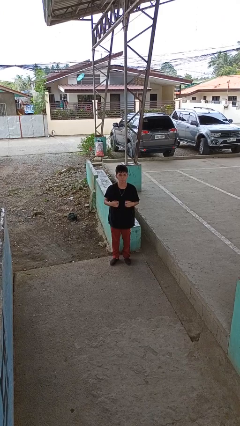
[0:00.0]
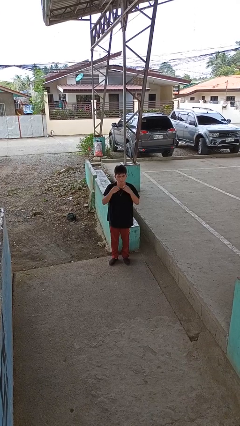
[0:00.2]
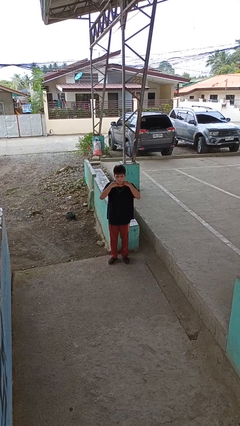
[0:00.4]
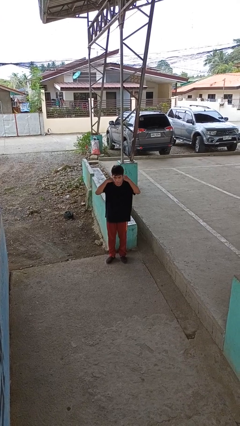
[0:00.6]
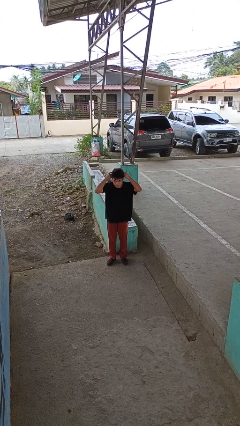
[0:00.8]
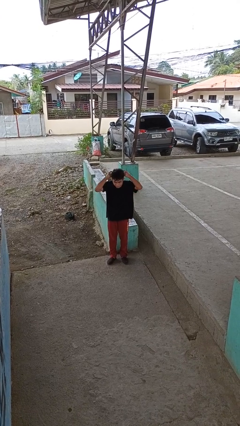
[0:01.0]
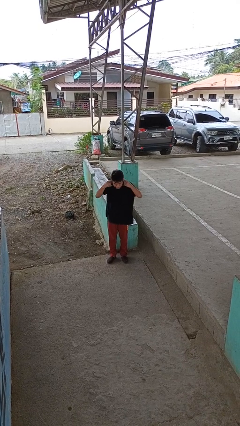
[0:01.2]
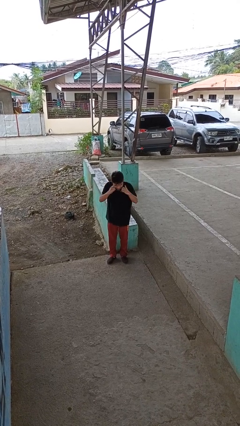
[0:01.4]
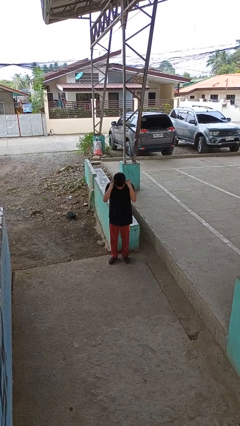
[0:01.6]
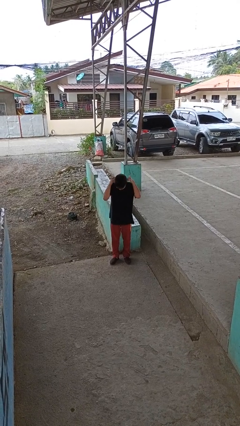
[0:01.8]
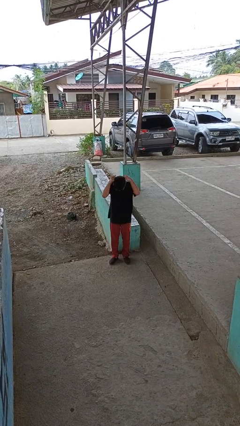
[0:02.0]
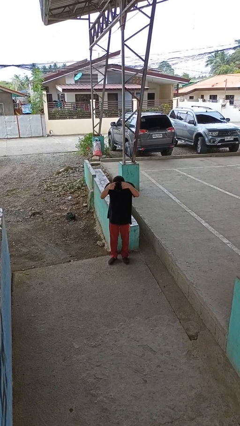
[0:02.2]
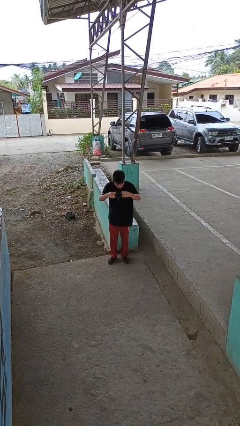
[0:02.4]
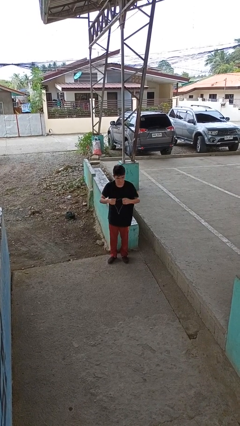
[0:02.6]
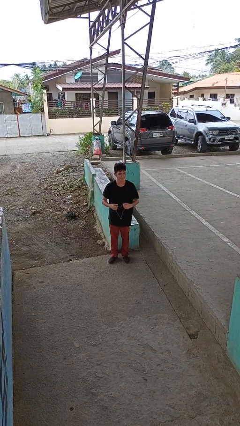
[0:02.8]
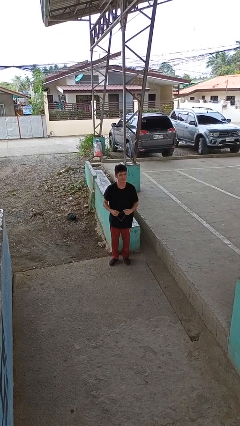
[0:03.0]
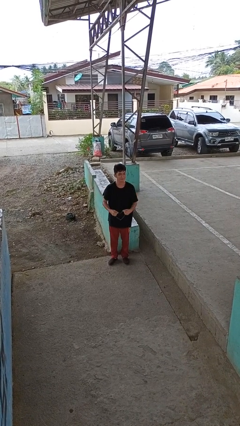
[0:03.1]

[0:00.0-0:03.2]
person takes off necklace

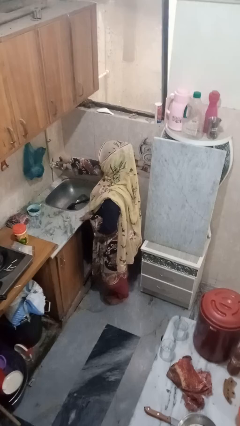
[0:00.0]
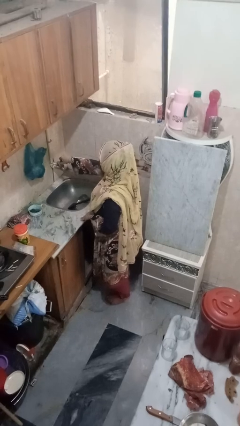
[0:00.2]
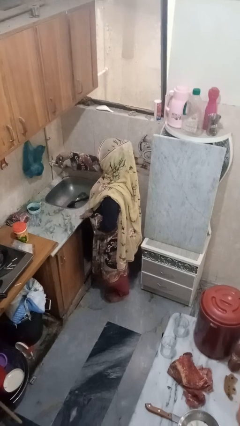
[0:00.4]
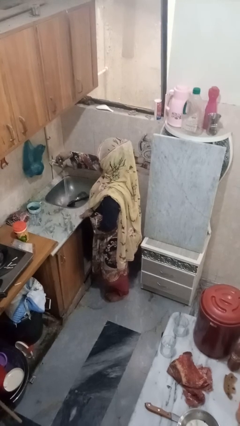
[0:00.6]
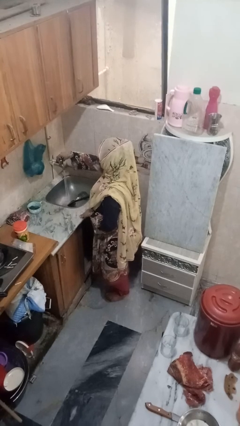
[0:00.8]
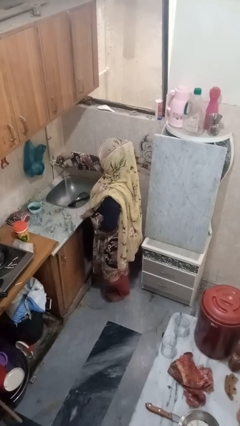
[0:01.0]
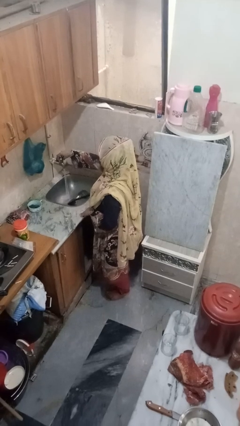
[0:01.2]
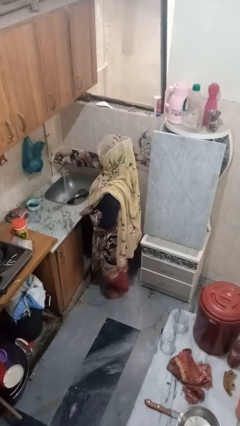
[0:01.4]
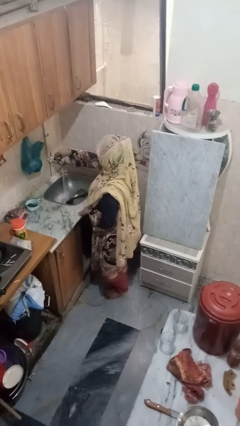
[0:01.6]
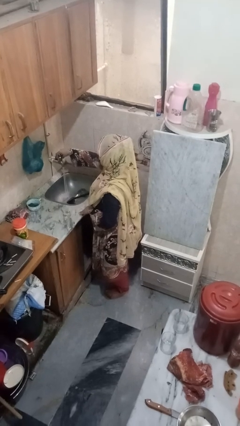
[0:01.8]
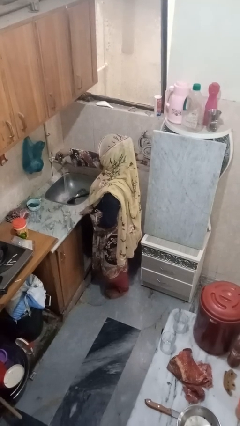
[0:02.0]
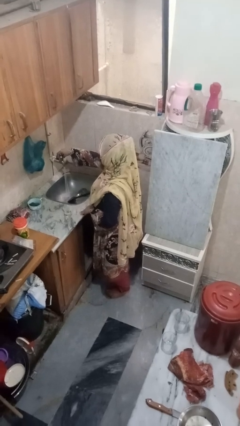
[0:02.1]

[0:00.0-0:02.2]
person turns on faucet

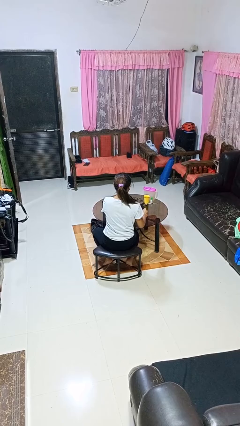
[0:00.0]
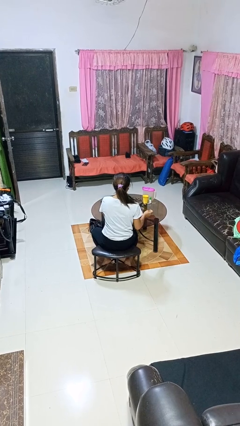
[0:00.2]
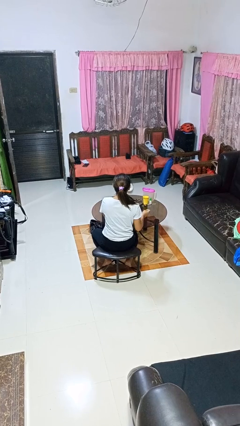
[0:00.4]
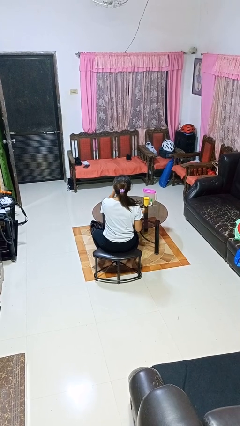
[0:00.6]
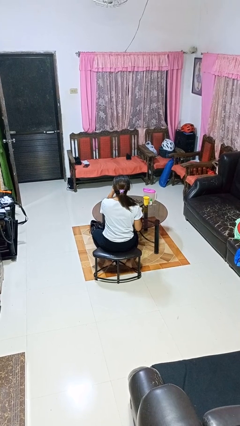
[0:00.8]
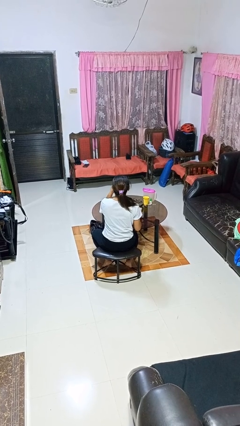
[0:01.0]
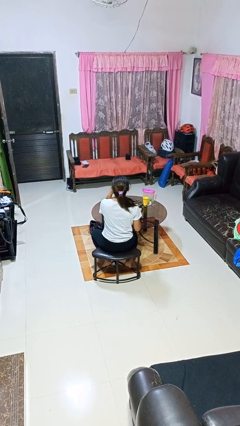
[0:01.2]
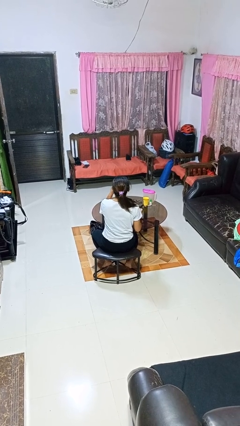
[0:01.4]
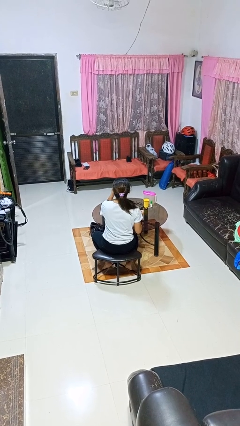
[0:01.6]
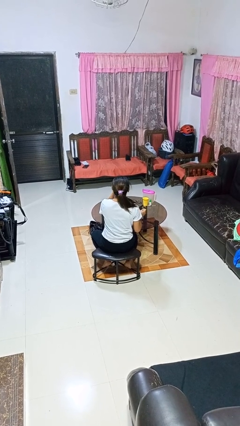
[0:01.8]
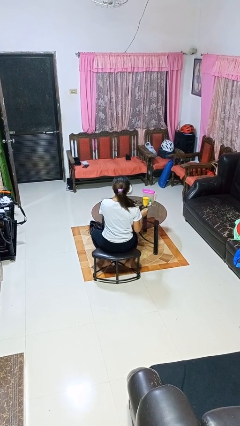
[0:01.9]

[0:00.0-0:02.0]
person drinks from mug

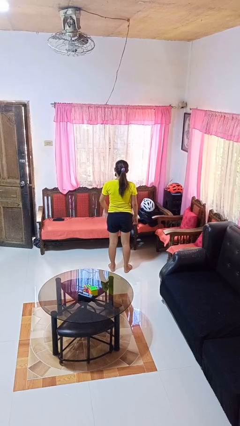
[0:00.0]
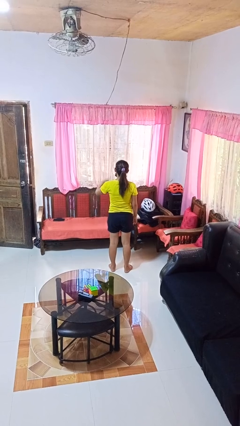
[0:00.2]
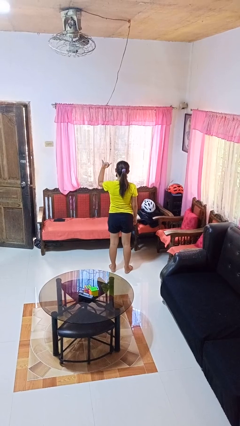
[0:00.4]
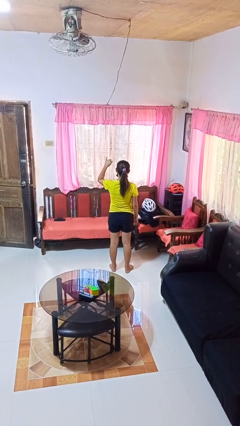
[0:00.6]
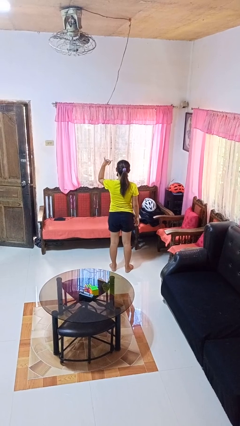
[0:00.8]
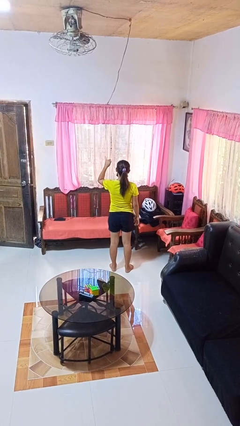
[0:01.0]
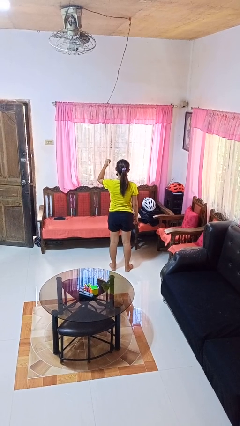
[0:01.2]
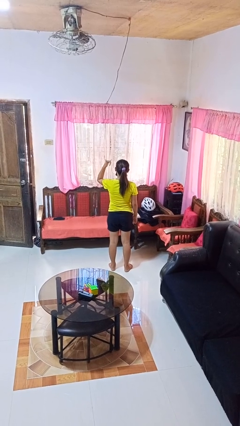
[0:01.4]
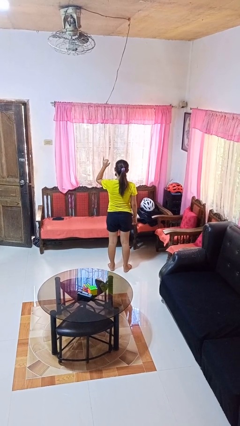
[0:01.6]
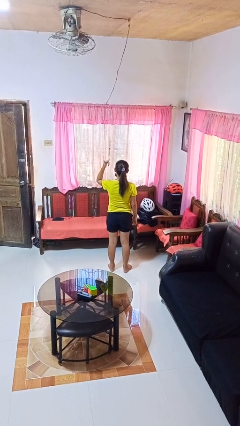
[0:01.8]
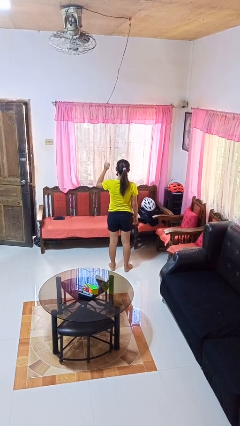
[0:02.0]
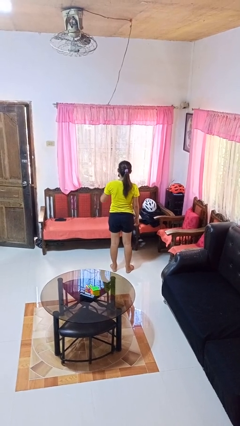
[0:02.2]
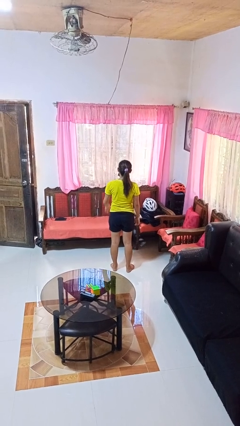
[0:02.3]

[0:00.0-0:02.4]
person gestures hang loose

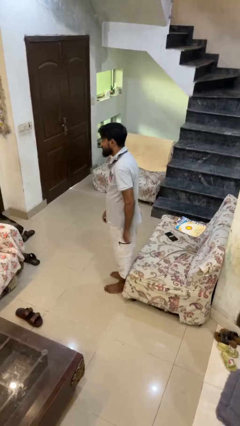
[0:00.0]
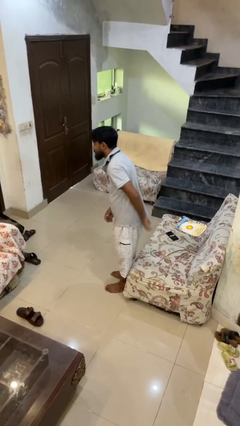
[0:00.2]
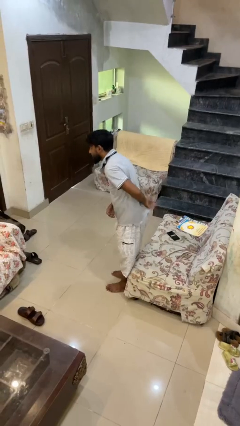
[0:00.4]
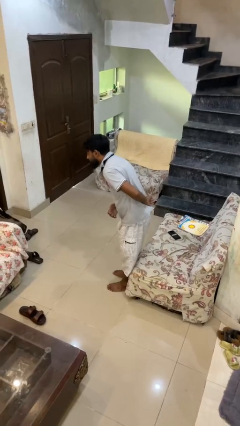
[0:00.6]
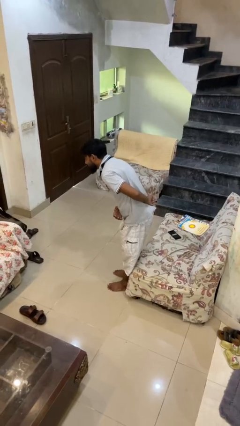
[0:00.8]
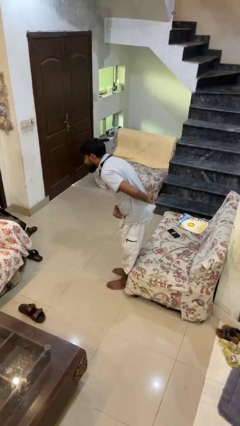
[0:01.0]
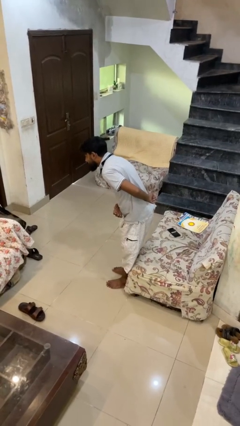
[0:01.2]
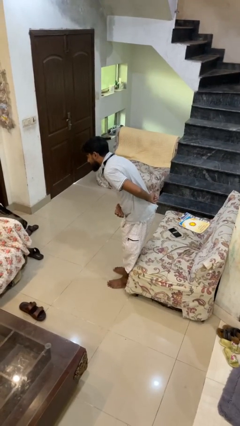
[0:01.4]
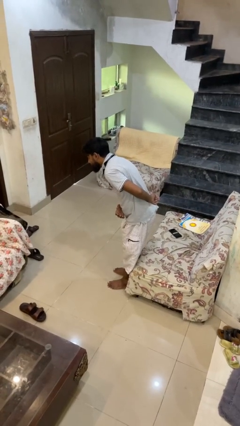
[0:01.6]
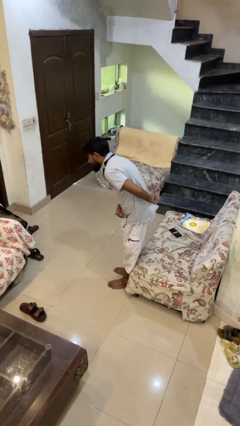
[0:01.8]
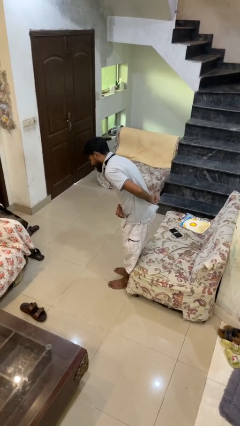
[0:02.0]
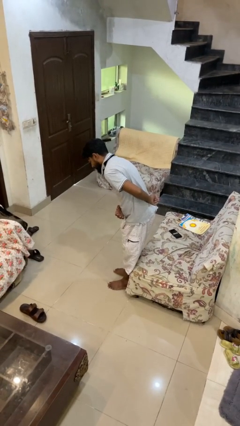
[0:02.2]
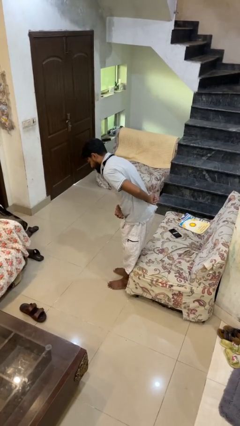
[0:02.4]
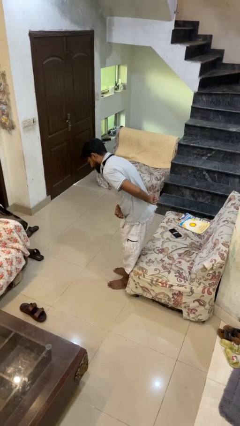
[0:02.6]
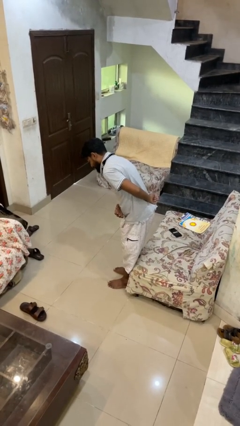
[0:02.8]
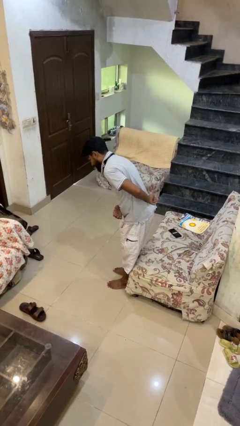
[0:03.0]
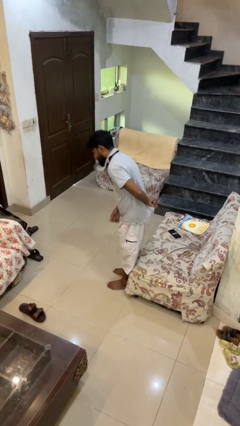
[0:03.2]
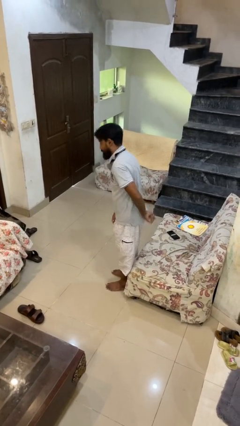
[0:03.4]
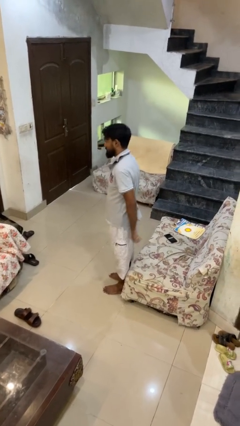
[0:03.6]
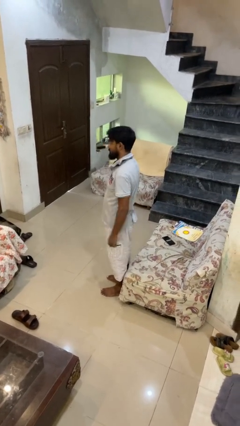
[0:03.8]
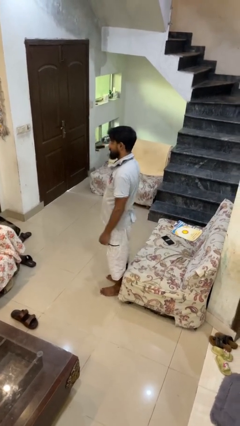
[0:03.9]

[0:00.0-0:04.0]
person bows

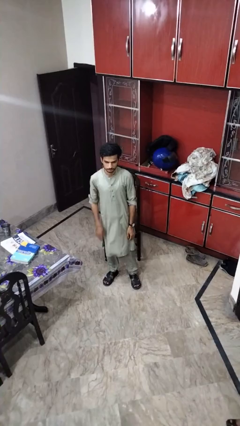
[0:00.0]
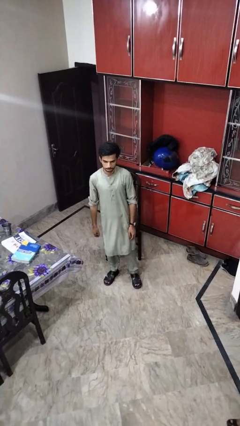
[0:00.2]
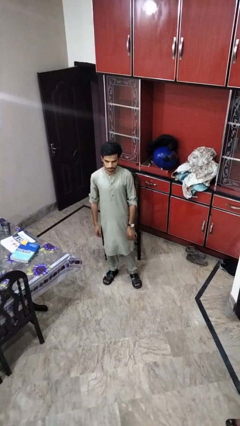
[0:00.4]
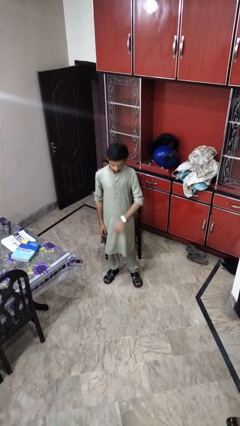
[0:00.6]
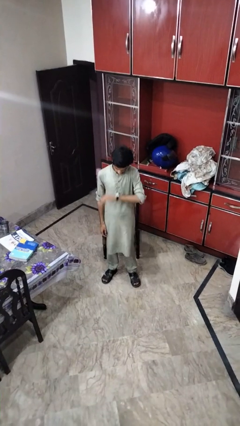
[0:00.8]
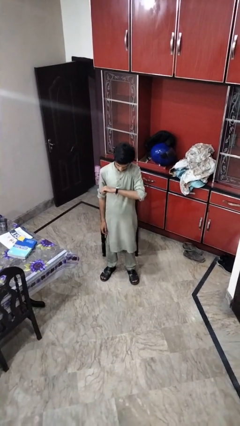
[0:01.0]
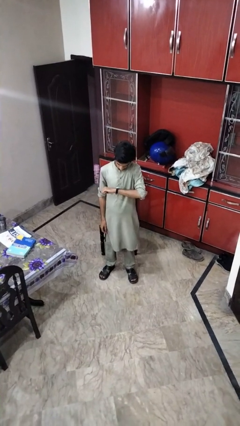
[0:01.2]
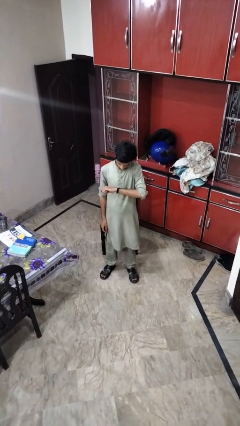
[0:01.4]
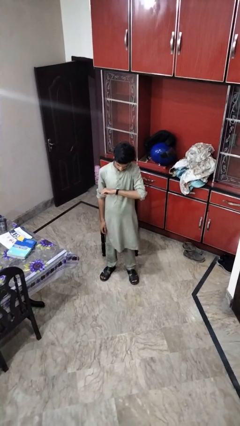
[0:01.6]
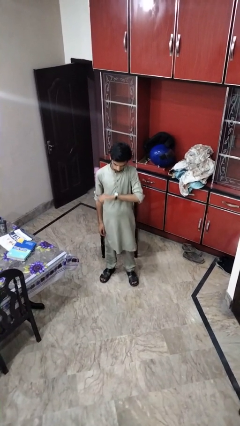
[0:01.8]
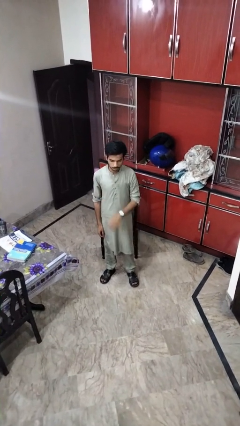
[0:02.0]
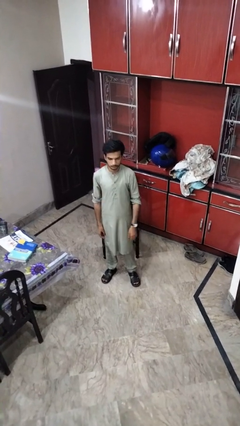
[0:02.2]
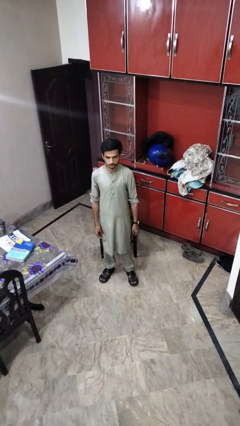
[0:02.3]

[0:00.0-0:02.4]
person looks at wristwatch

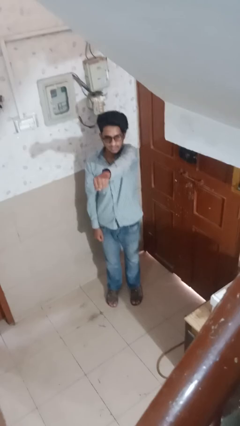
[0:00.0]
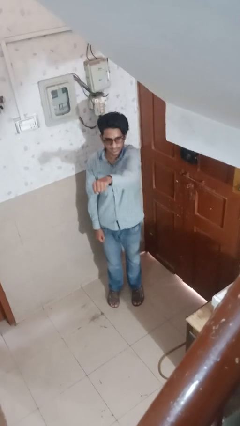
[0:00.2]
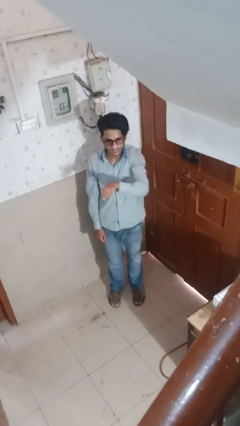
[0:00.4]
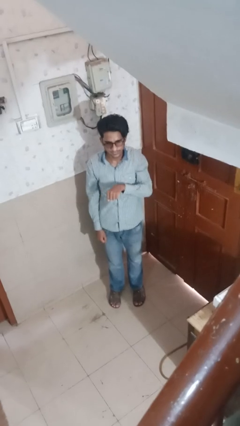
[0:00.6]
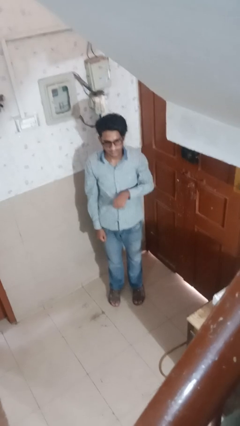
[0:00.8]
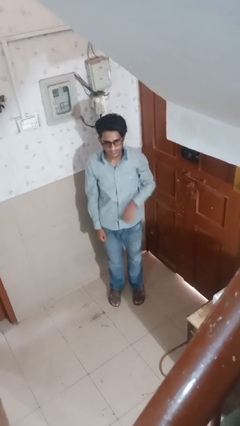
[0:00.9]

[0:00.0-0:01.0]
person punches
